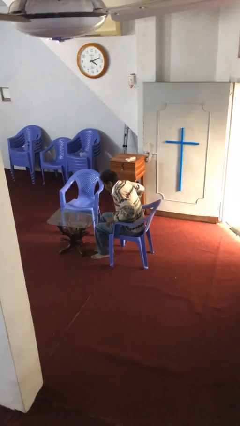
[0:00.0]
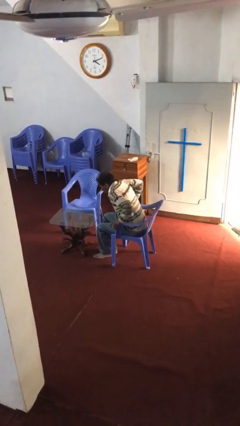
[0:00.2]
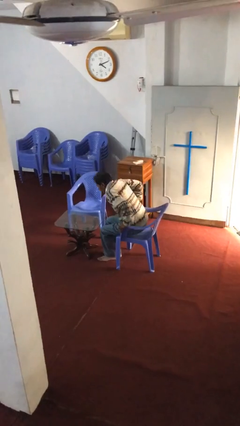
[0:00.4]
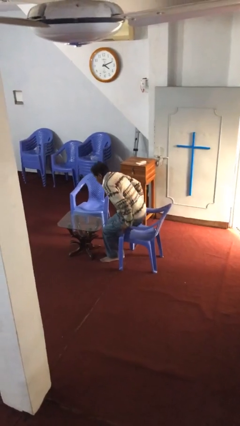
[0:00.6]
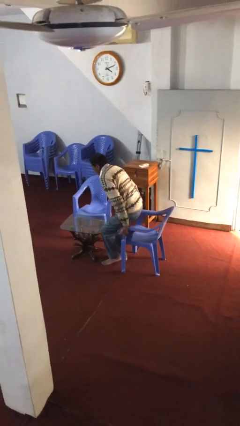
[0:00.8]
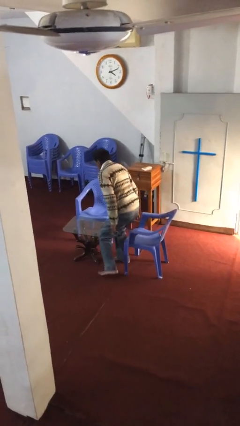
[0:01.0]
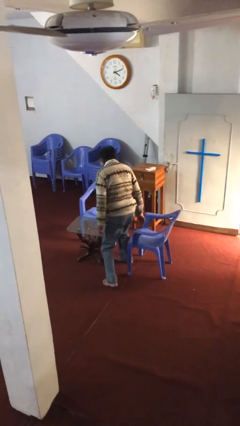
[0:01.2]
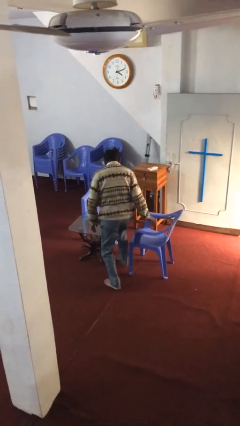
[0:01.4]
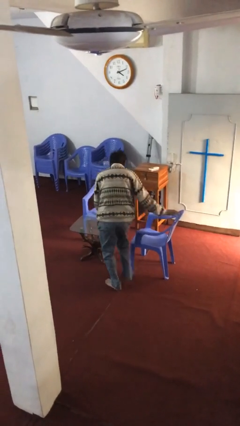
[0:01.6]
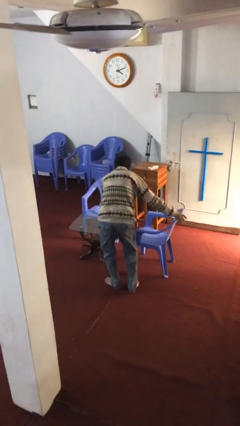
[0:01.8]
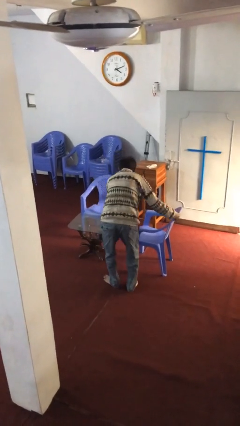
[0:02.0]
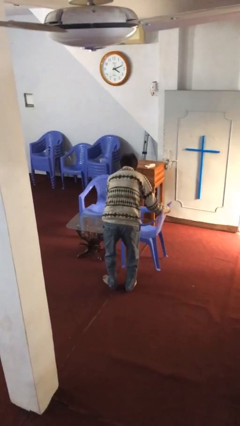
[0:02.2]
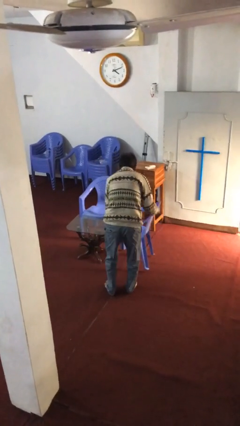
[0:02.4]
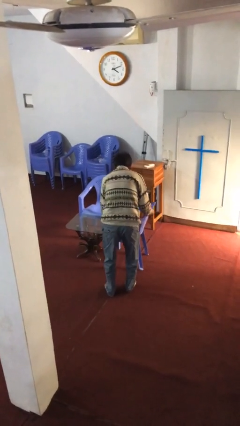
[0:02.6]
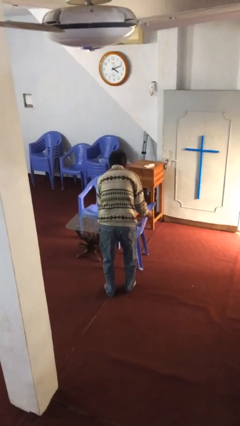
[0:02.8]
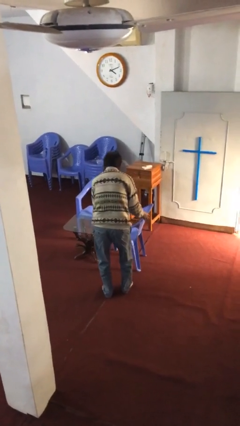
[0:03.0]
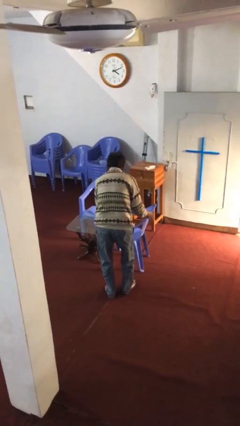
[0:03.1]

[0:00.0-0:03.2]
person stands up

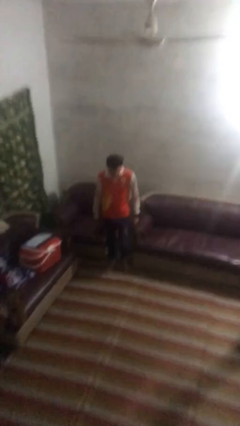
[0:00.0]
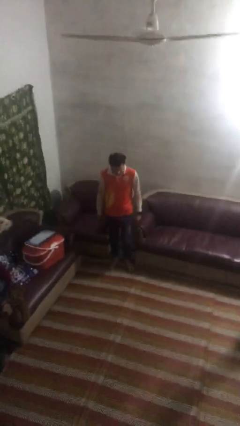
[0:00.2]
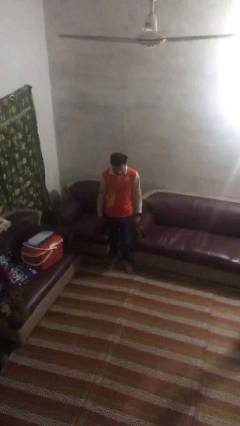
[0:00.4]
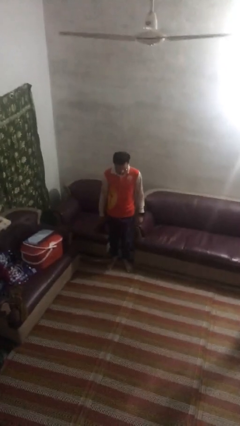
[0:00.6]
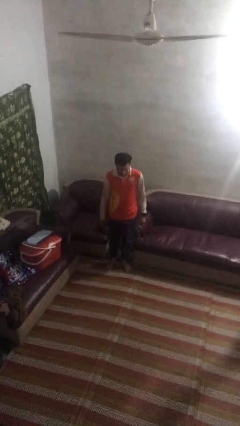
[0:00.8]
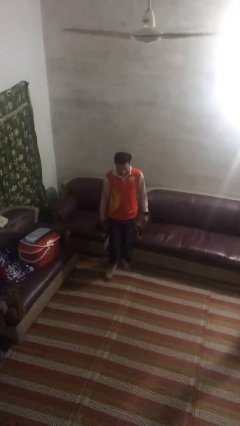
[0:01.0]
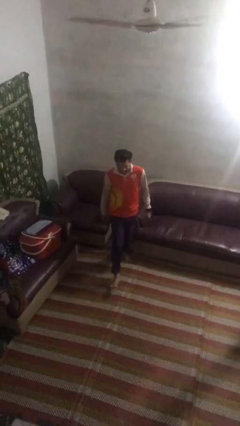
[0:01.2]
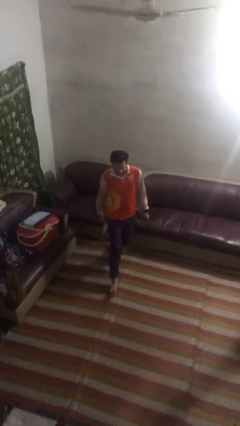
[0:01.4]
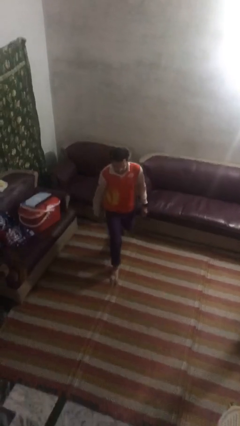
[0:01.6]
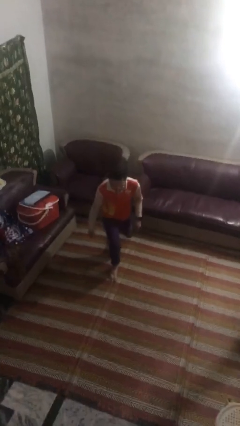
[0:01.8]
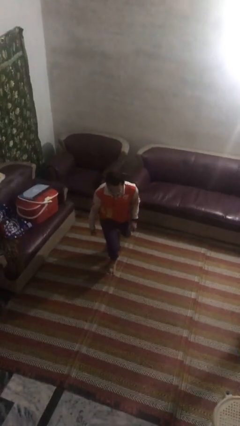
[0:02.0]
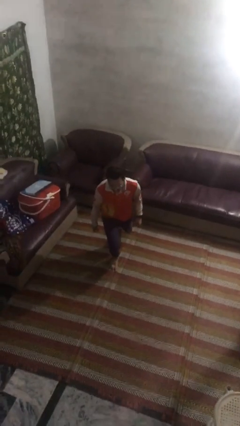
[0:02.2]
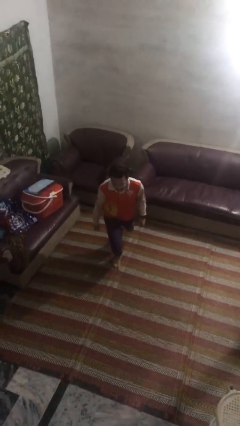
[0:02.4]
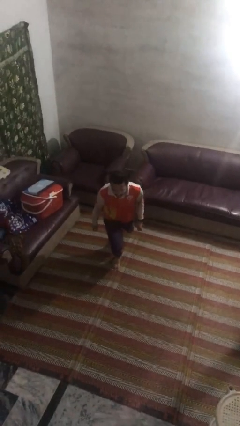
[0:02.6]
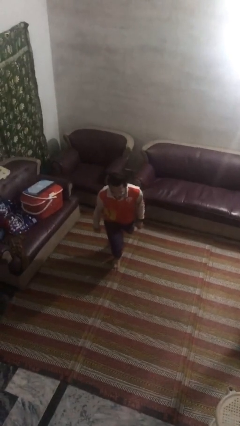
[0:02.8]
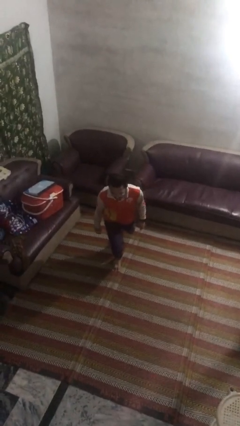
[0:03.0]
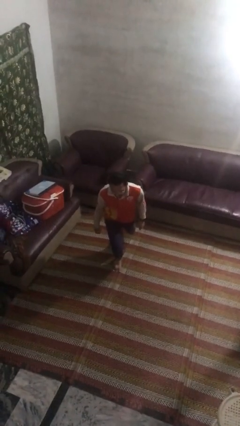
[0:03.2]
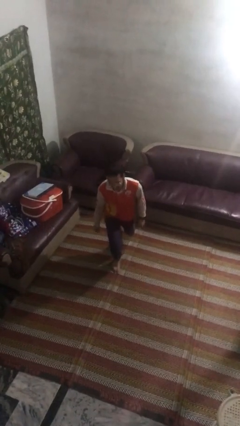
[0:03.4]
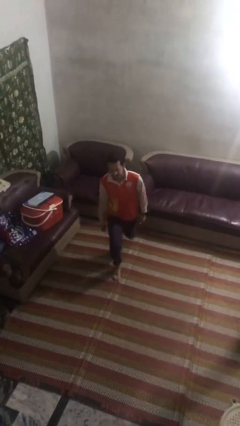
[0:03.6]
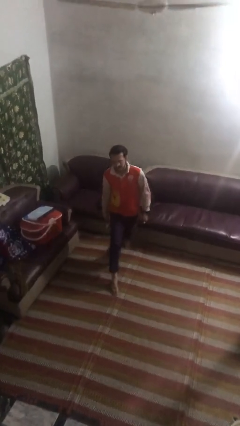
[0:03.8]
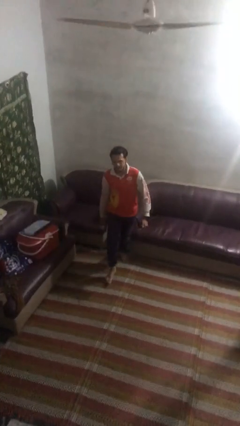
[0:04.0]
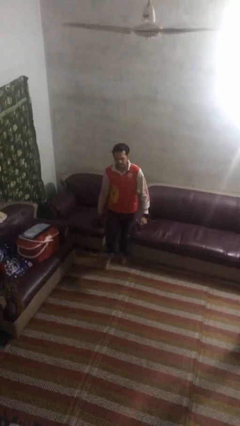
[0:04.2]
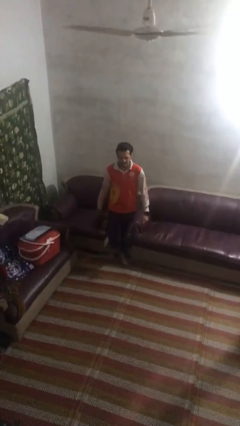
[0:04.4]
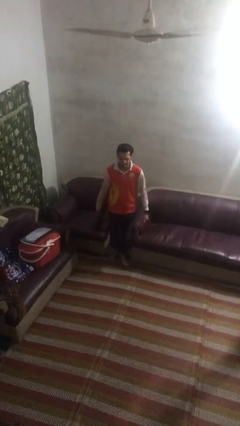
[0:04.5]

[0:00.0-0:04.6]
person exercises with lunges

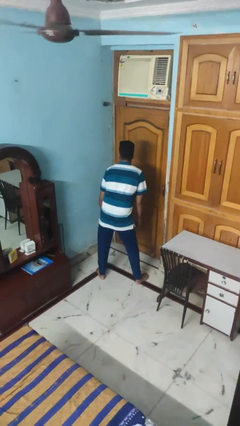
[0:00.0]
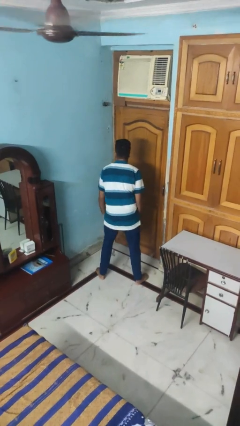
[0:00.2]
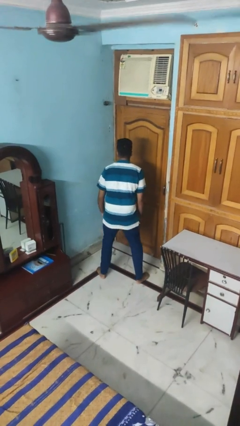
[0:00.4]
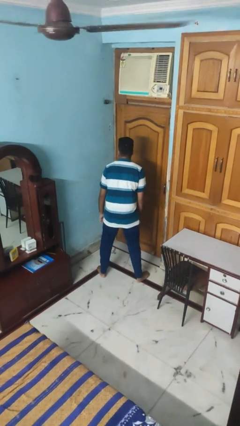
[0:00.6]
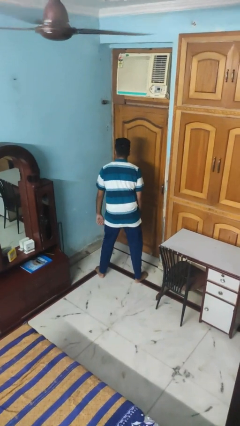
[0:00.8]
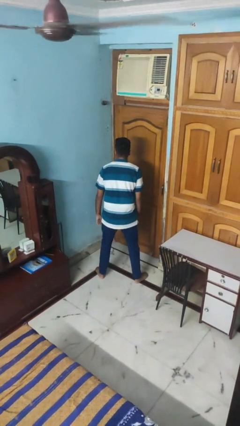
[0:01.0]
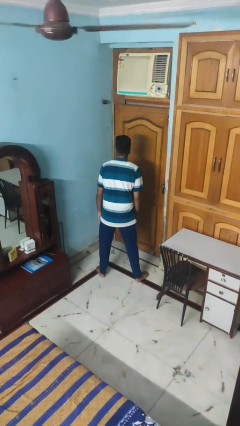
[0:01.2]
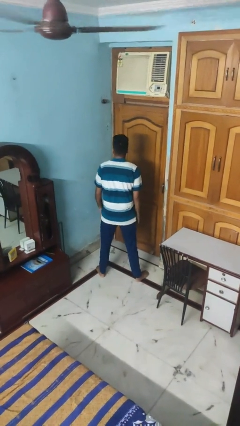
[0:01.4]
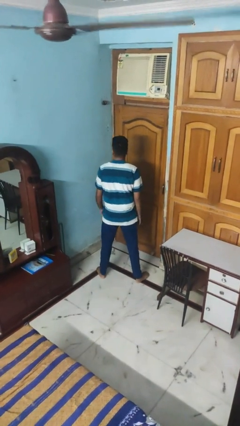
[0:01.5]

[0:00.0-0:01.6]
person wiggles hips

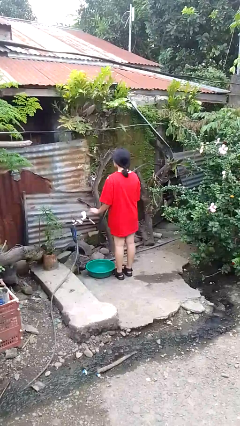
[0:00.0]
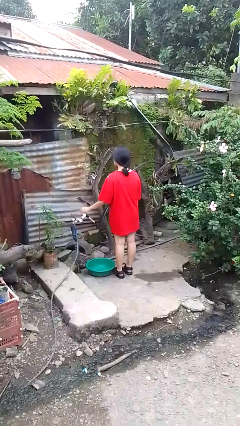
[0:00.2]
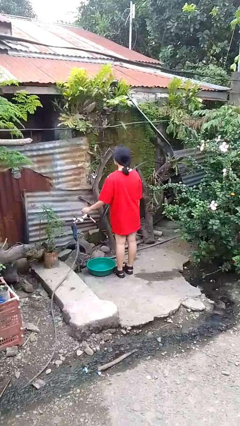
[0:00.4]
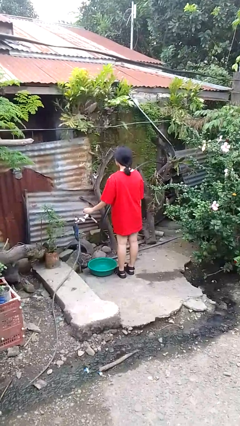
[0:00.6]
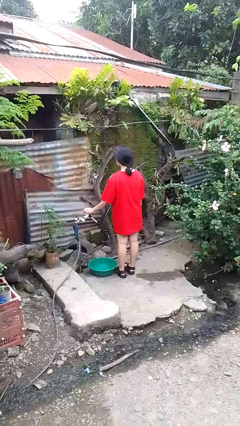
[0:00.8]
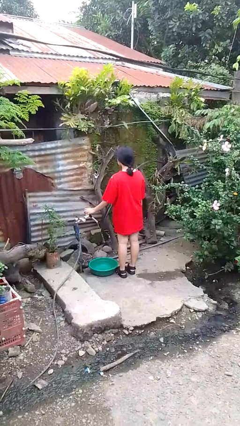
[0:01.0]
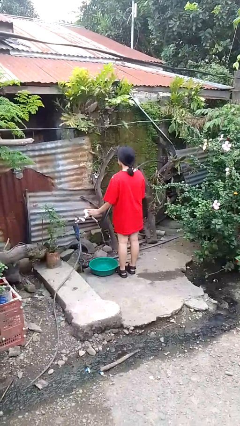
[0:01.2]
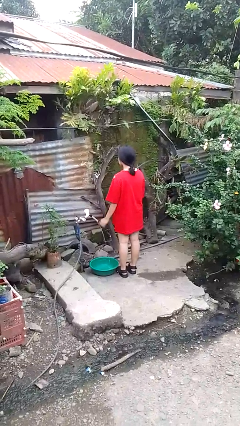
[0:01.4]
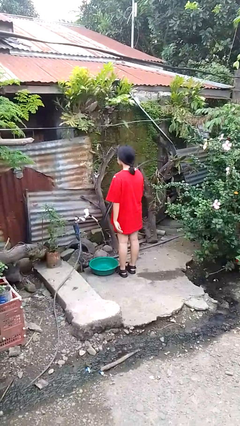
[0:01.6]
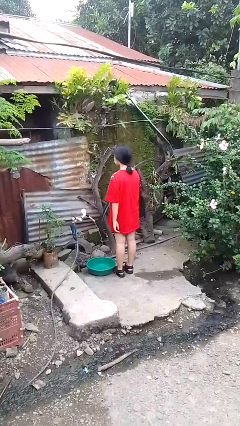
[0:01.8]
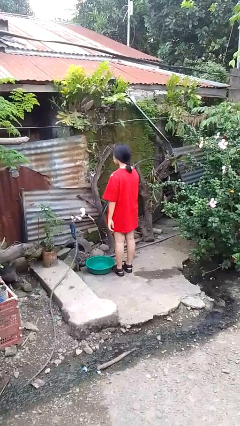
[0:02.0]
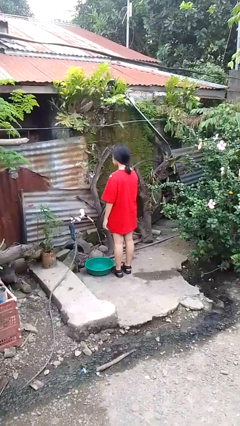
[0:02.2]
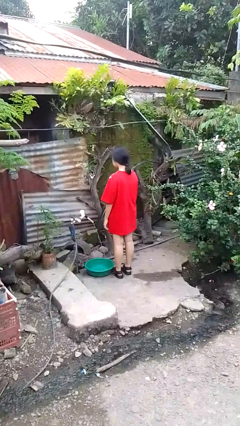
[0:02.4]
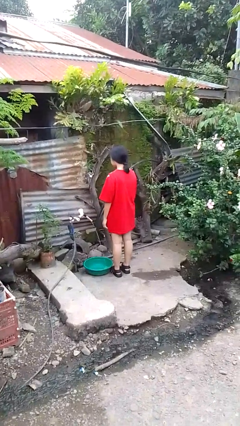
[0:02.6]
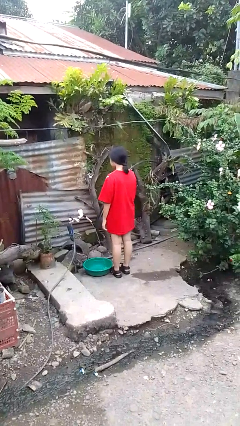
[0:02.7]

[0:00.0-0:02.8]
person turns on faucet

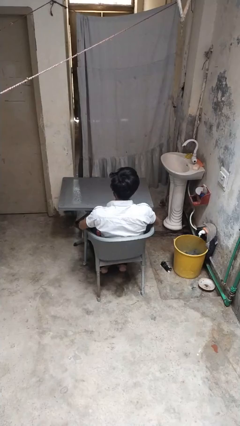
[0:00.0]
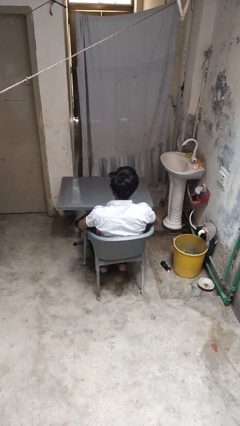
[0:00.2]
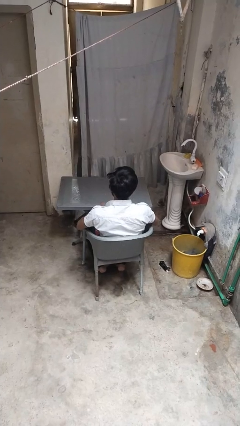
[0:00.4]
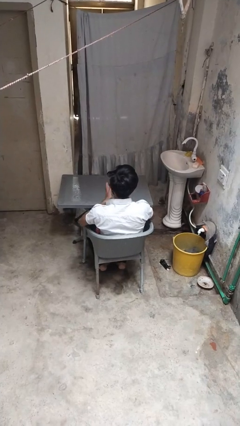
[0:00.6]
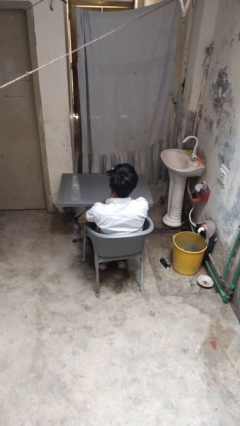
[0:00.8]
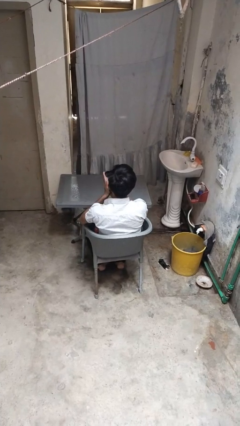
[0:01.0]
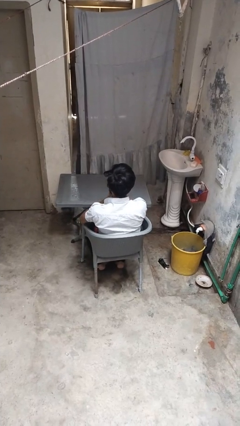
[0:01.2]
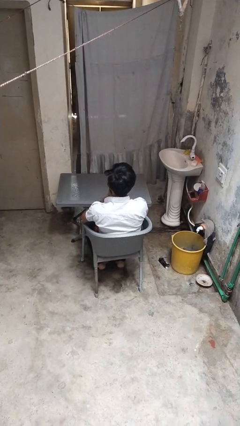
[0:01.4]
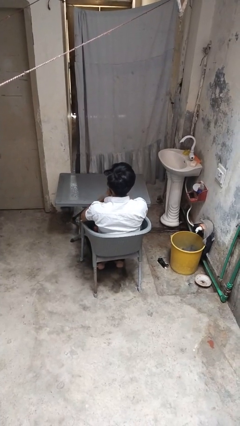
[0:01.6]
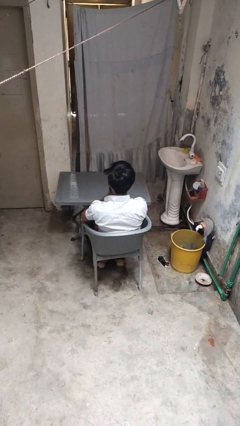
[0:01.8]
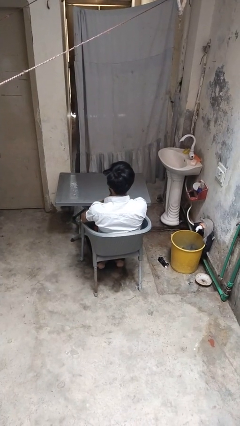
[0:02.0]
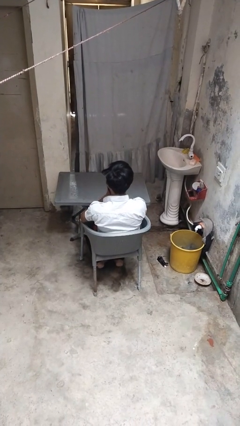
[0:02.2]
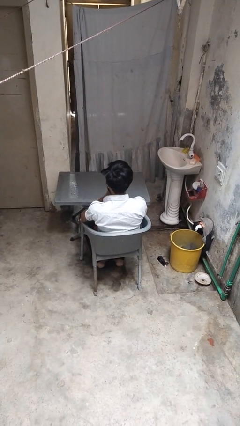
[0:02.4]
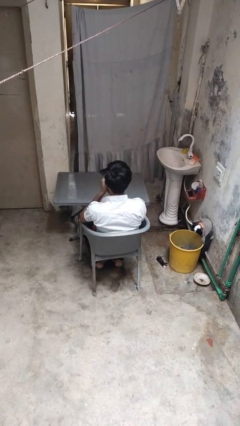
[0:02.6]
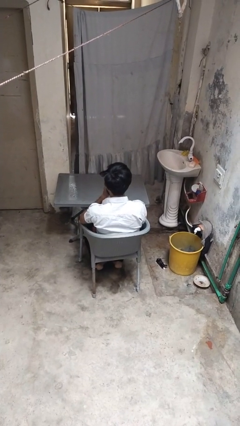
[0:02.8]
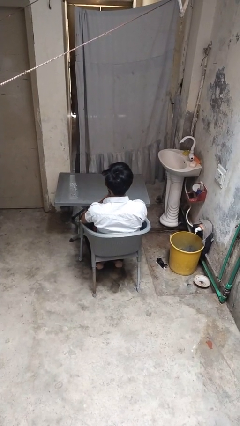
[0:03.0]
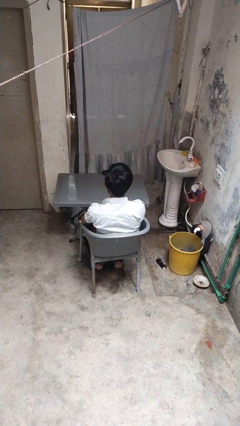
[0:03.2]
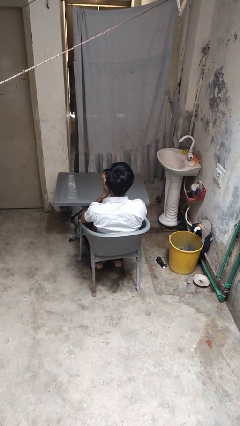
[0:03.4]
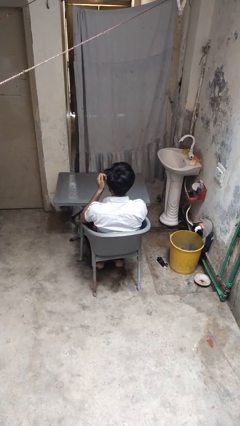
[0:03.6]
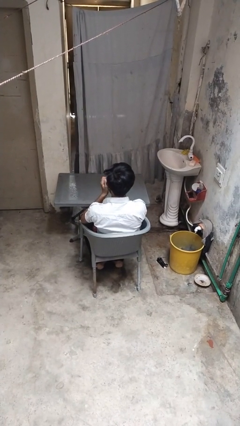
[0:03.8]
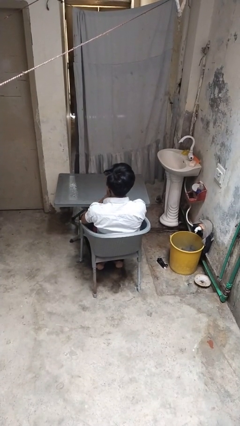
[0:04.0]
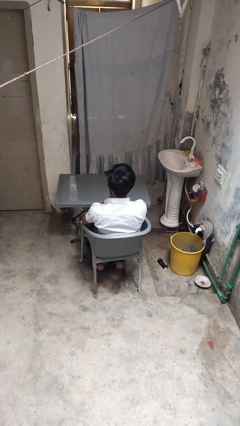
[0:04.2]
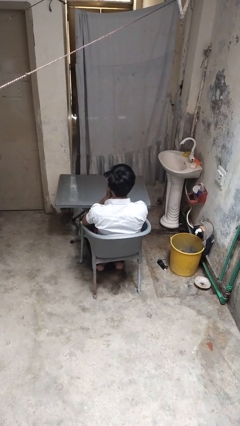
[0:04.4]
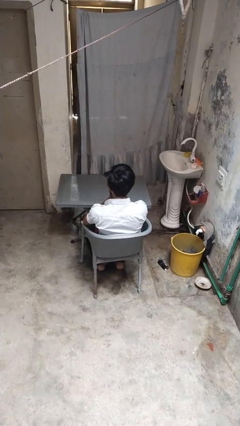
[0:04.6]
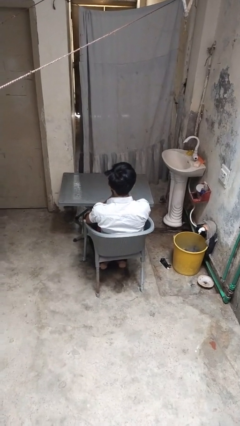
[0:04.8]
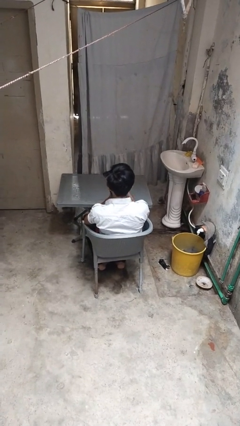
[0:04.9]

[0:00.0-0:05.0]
person blows into hands

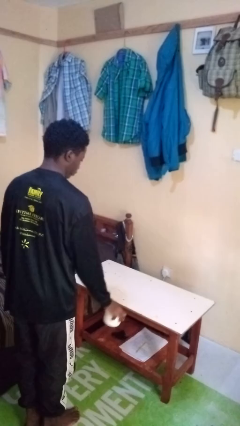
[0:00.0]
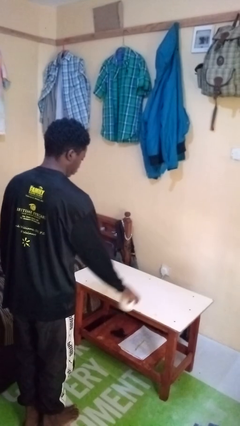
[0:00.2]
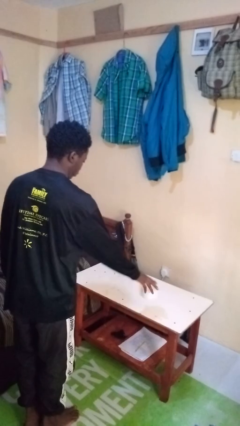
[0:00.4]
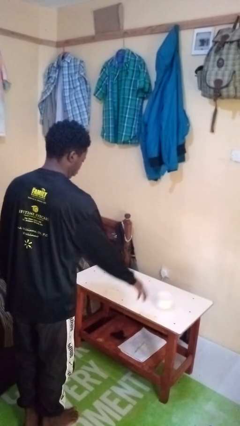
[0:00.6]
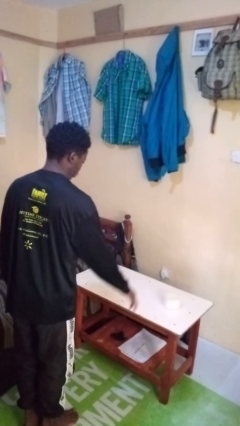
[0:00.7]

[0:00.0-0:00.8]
person throws object on table
